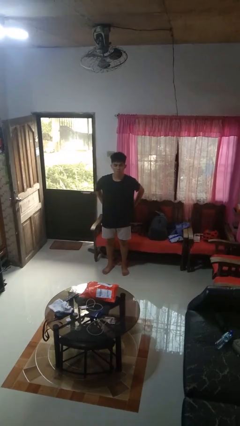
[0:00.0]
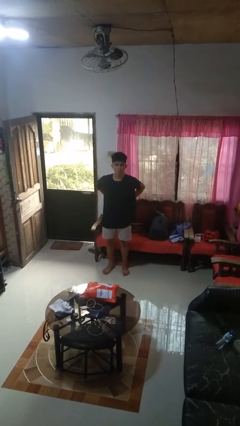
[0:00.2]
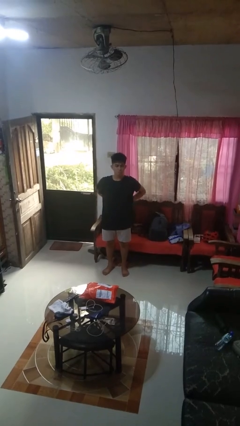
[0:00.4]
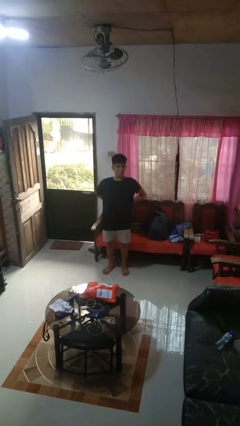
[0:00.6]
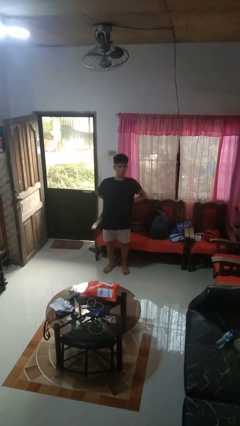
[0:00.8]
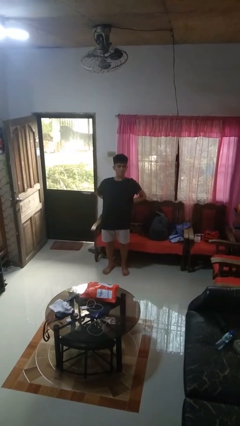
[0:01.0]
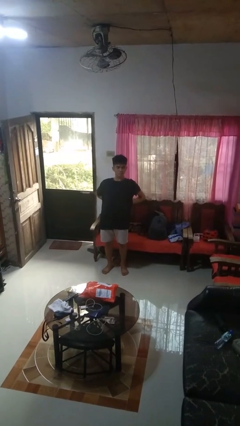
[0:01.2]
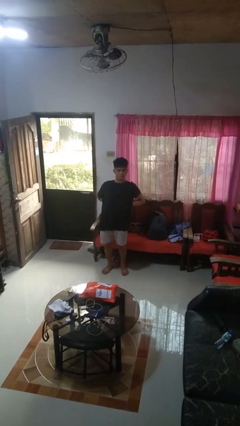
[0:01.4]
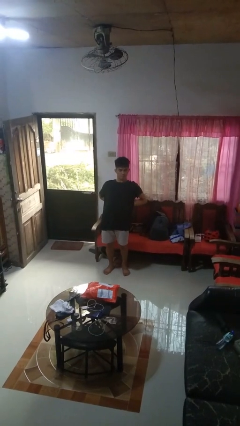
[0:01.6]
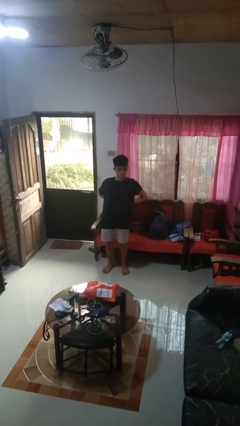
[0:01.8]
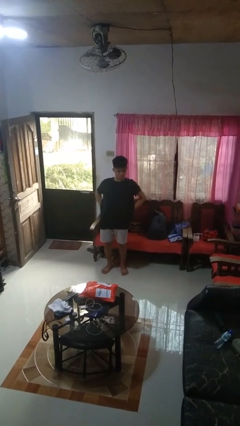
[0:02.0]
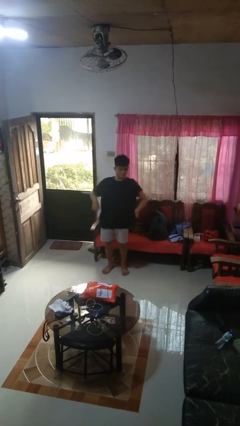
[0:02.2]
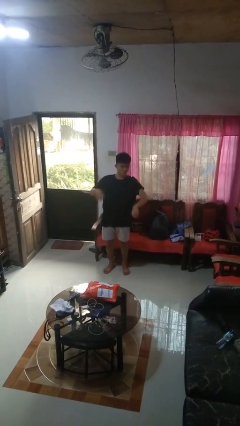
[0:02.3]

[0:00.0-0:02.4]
person stretches back

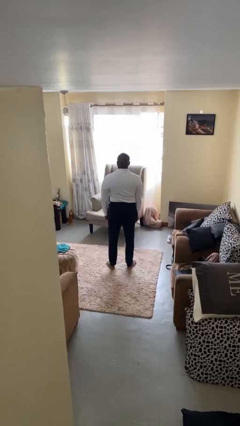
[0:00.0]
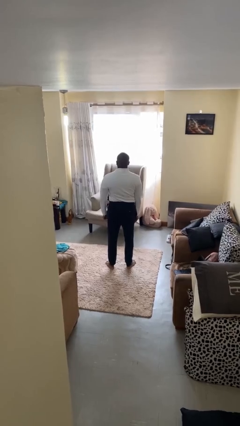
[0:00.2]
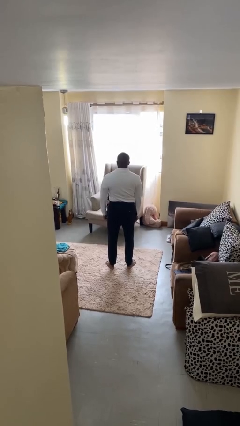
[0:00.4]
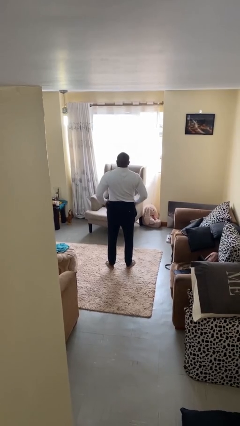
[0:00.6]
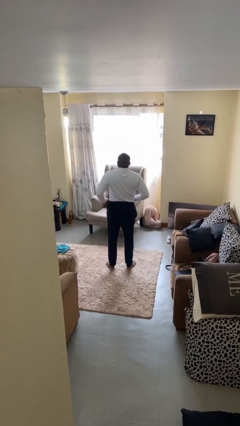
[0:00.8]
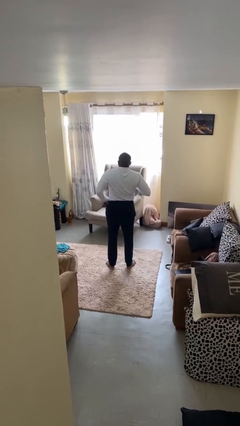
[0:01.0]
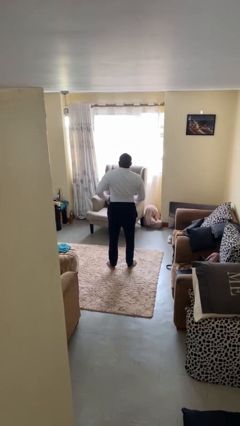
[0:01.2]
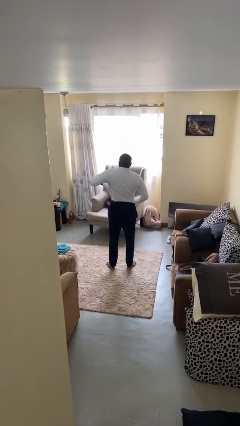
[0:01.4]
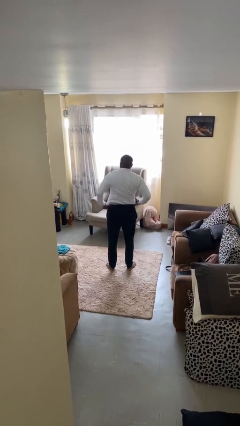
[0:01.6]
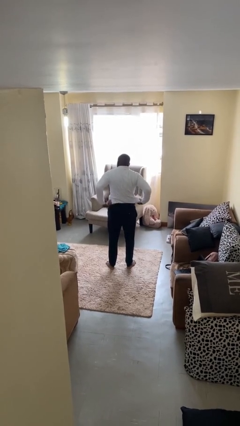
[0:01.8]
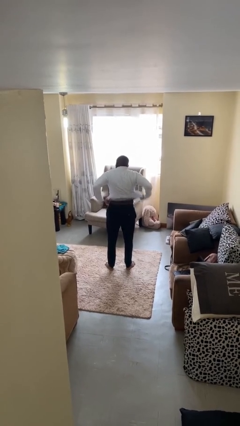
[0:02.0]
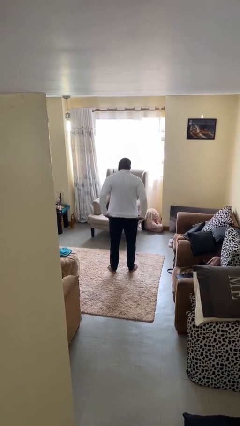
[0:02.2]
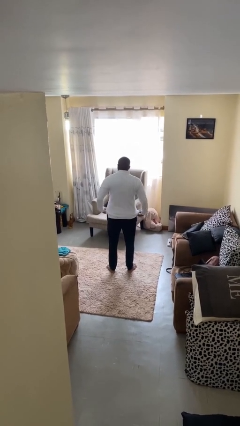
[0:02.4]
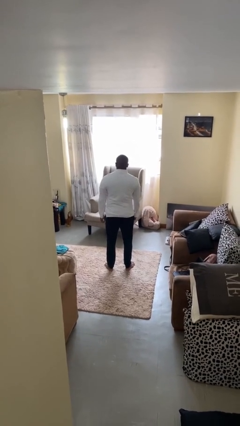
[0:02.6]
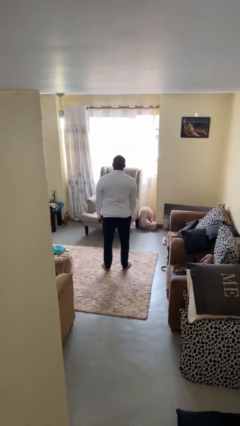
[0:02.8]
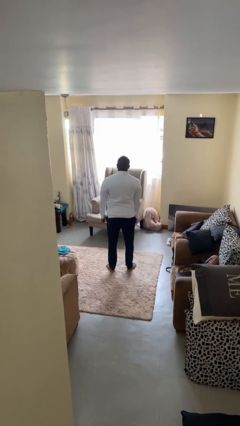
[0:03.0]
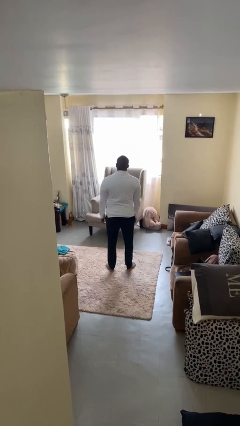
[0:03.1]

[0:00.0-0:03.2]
person untucks shirt

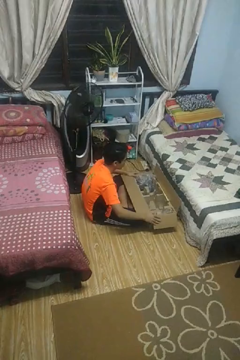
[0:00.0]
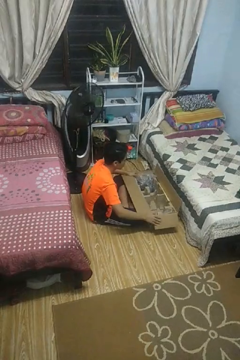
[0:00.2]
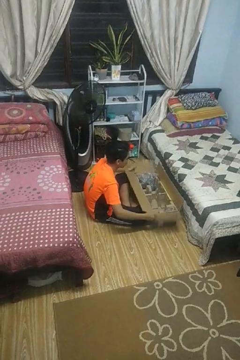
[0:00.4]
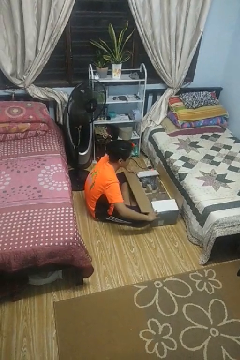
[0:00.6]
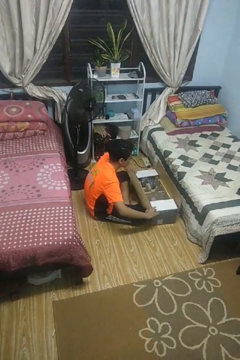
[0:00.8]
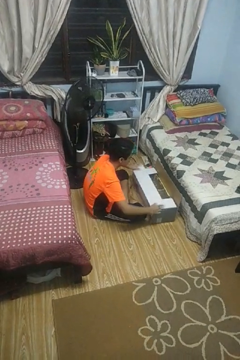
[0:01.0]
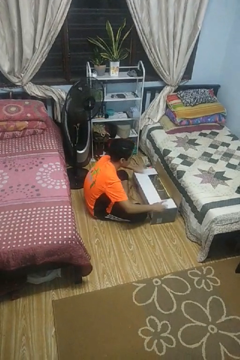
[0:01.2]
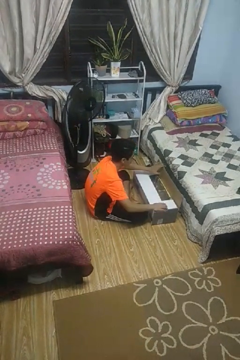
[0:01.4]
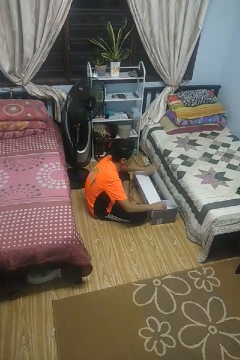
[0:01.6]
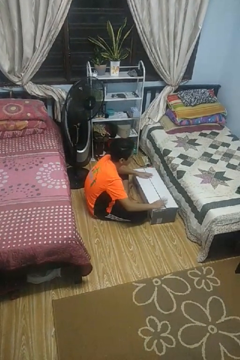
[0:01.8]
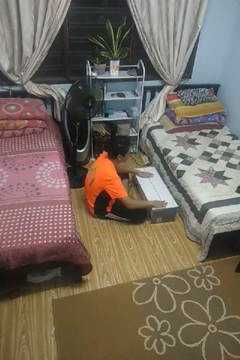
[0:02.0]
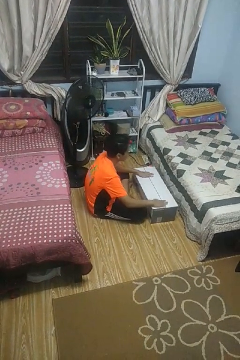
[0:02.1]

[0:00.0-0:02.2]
person closes box

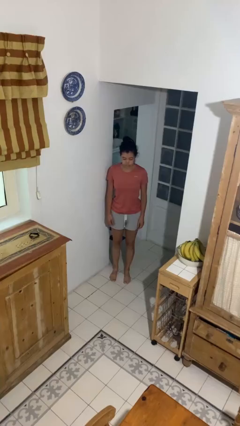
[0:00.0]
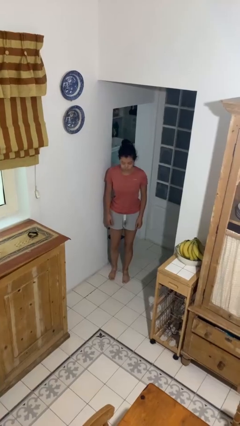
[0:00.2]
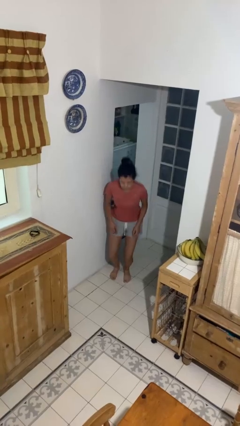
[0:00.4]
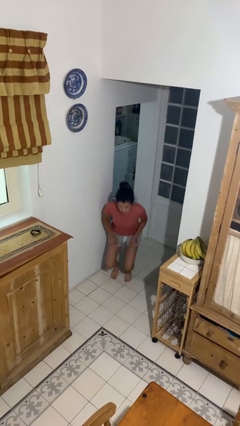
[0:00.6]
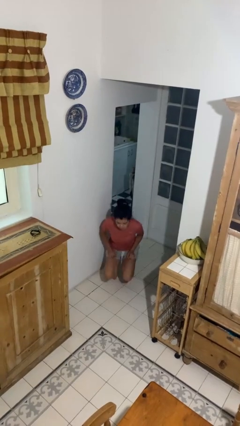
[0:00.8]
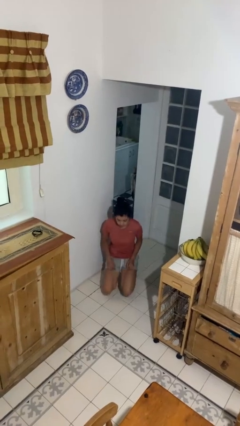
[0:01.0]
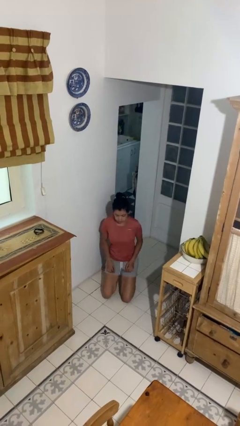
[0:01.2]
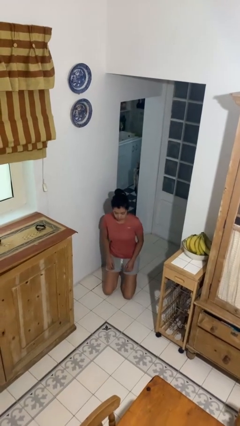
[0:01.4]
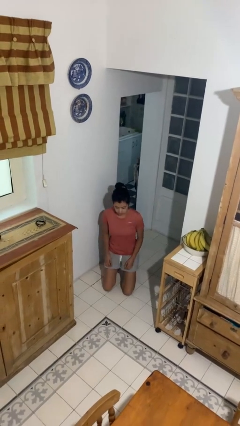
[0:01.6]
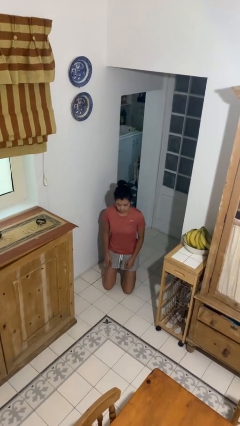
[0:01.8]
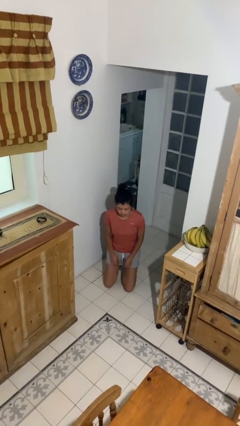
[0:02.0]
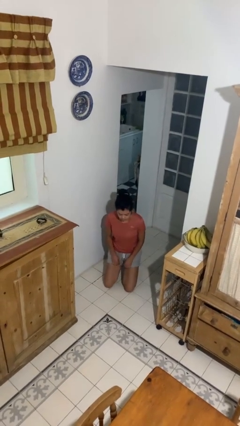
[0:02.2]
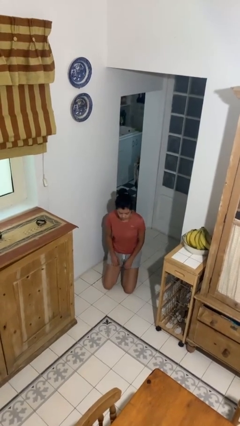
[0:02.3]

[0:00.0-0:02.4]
person kneels

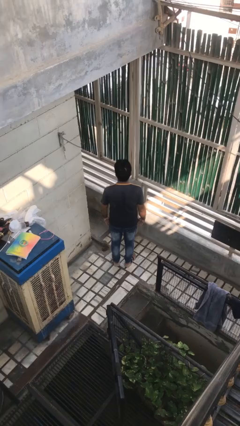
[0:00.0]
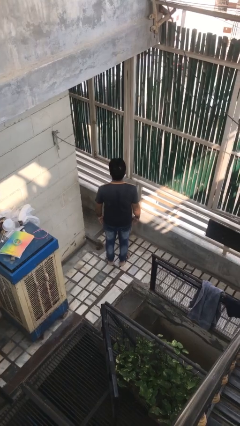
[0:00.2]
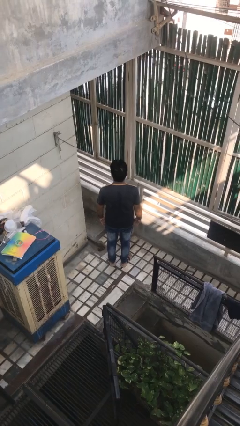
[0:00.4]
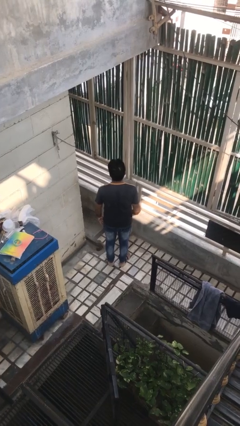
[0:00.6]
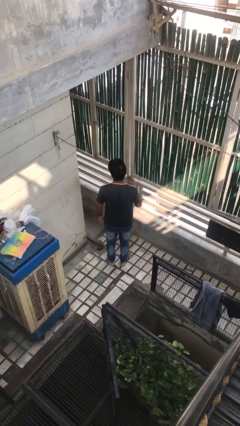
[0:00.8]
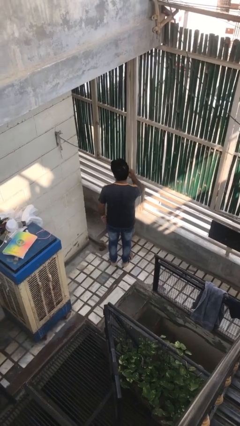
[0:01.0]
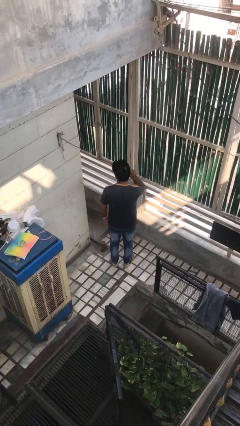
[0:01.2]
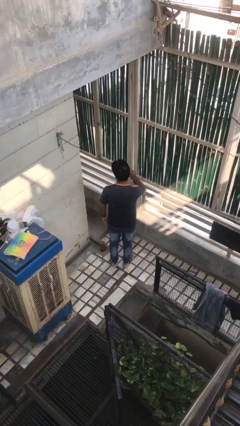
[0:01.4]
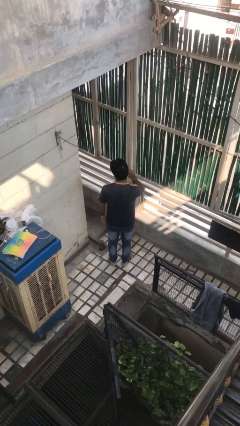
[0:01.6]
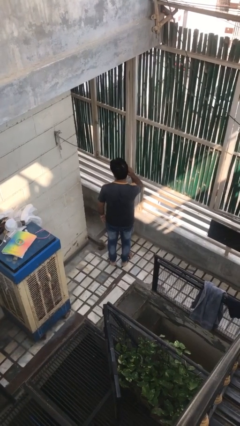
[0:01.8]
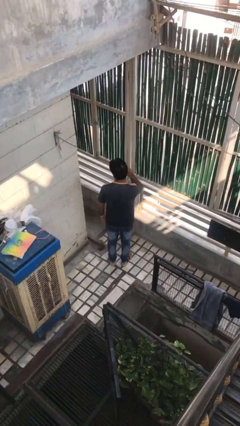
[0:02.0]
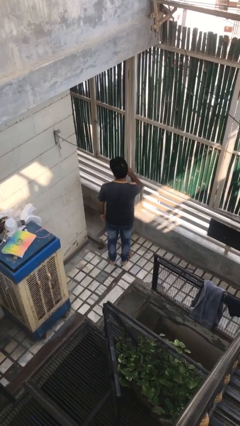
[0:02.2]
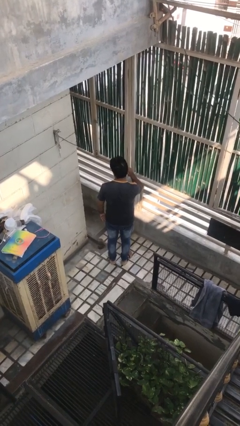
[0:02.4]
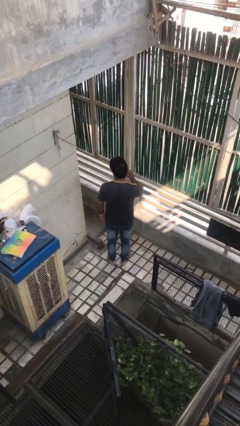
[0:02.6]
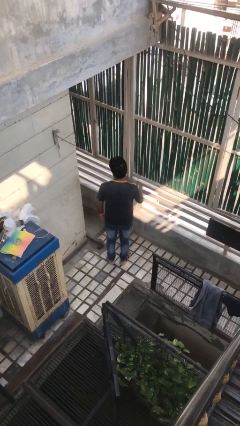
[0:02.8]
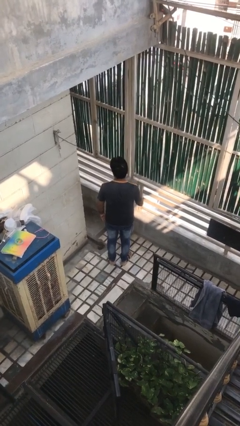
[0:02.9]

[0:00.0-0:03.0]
person touches earlobe

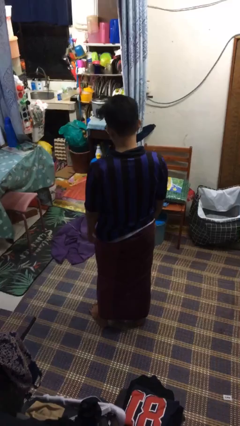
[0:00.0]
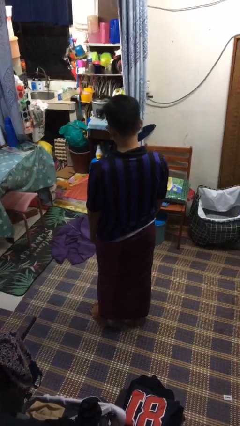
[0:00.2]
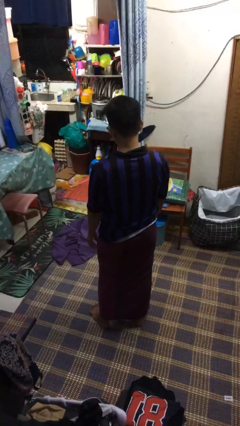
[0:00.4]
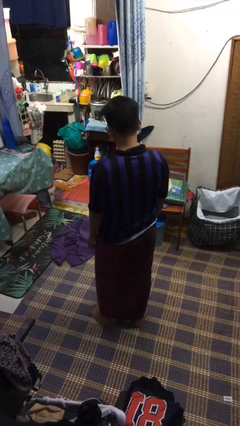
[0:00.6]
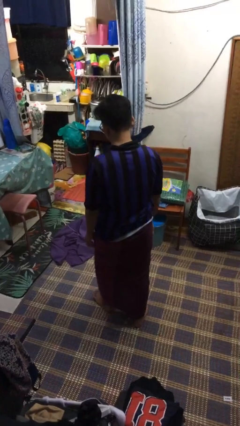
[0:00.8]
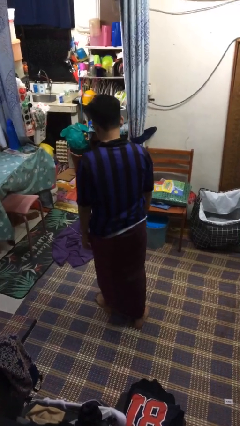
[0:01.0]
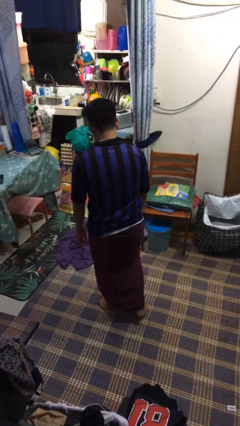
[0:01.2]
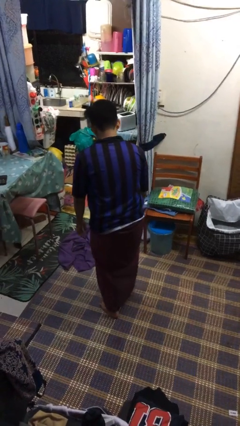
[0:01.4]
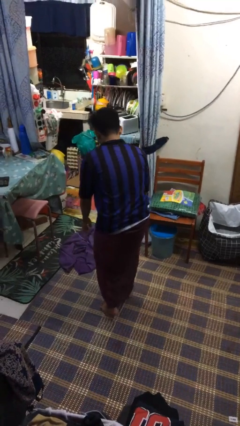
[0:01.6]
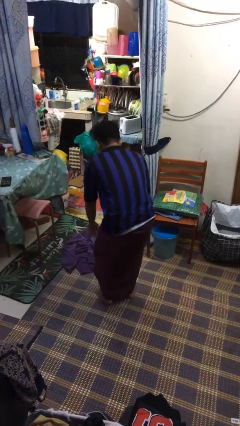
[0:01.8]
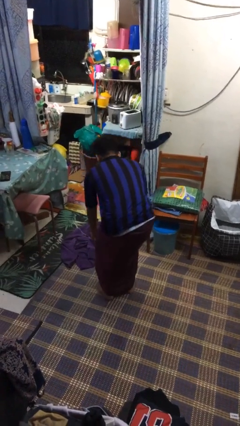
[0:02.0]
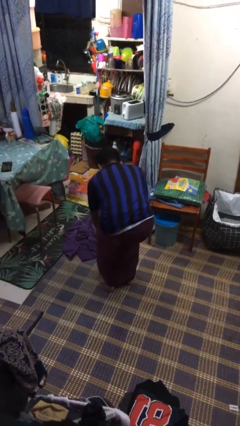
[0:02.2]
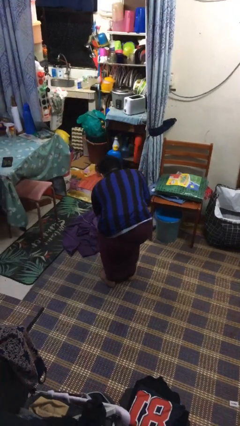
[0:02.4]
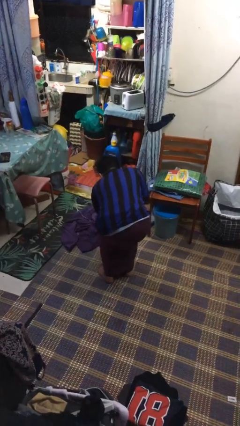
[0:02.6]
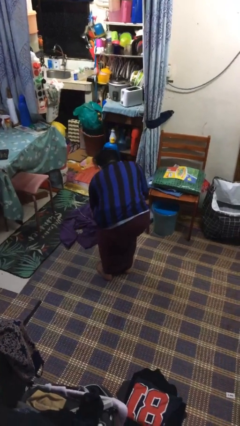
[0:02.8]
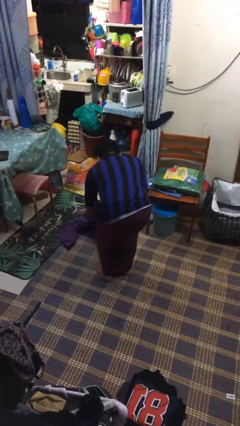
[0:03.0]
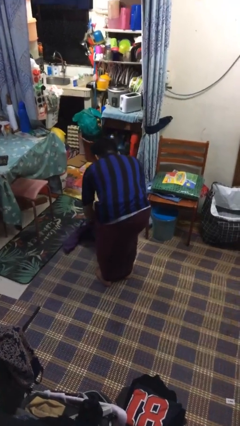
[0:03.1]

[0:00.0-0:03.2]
person picks up object from floor

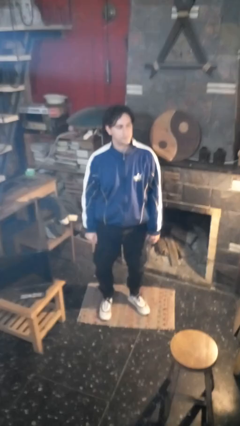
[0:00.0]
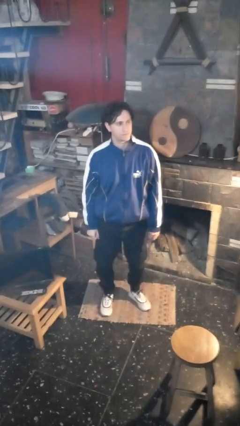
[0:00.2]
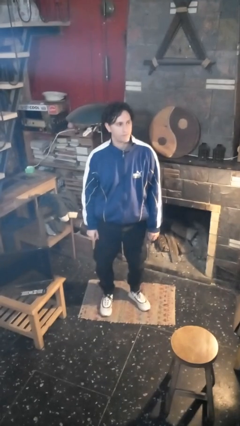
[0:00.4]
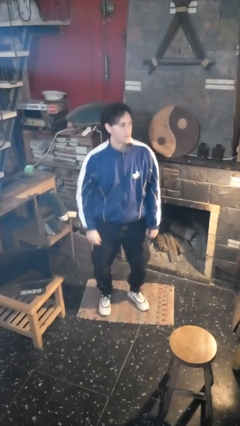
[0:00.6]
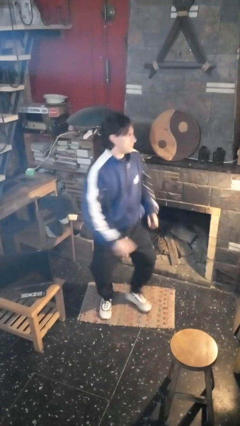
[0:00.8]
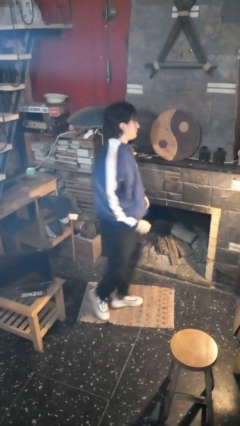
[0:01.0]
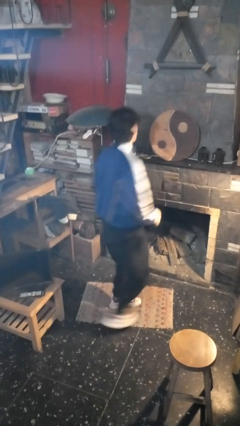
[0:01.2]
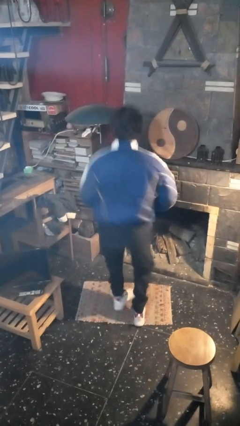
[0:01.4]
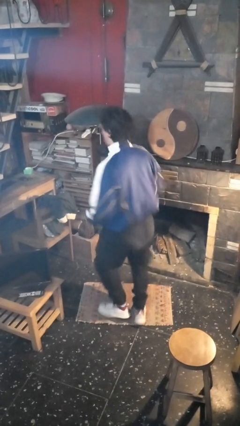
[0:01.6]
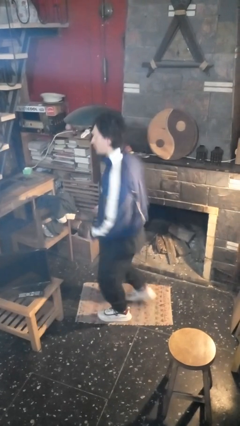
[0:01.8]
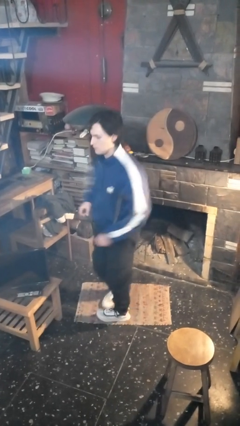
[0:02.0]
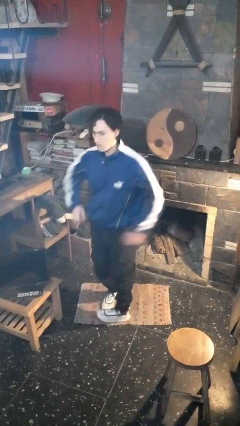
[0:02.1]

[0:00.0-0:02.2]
person twirls
